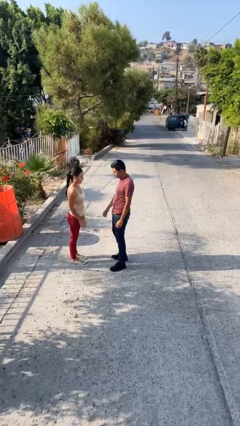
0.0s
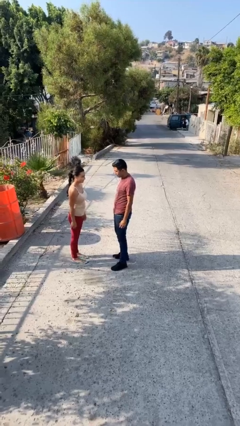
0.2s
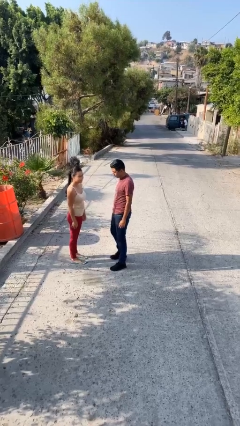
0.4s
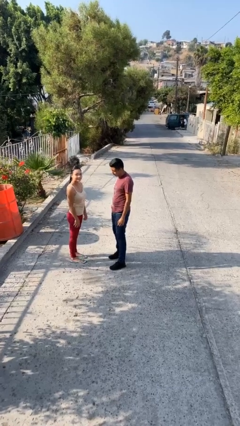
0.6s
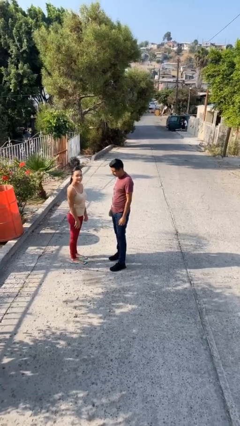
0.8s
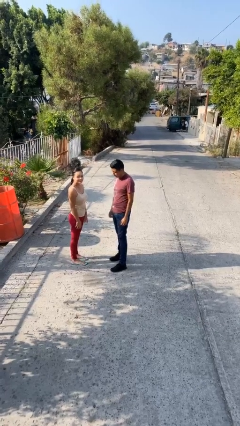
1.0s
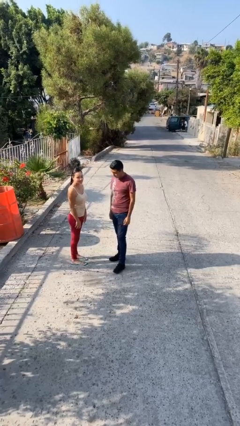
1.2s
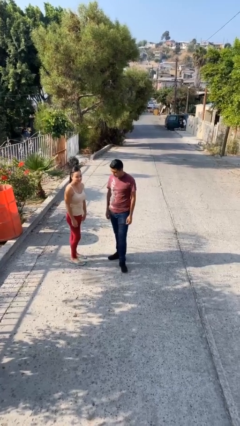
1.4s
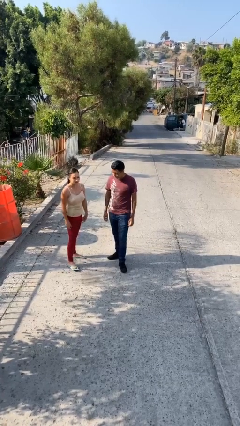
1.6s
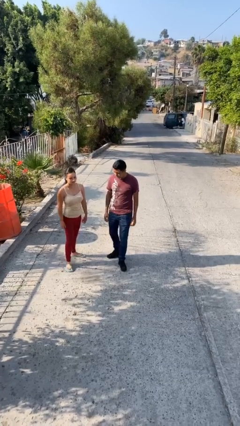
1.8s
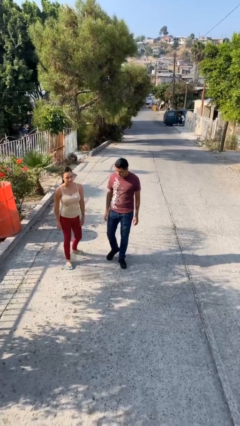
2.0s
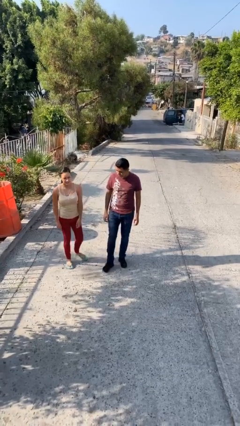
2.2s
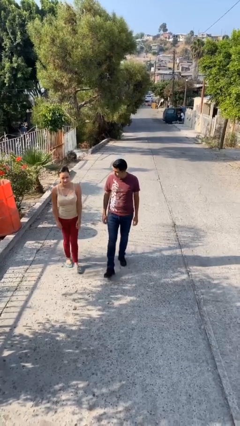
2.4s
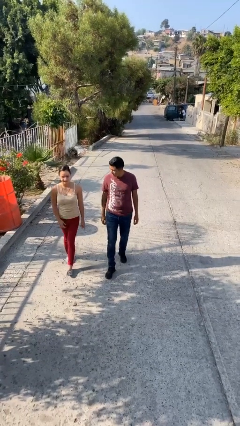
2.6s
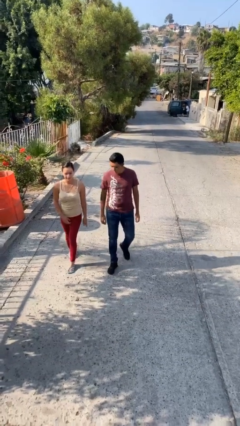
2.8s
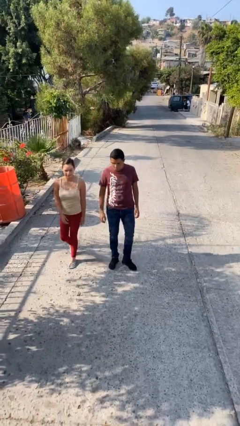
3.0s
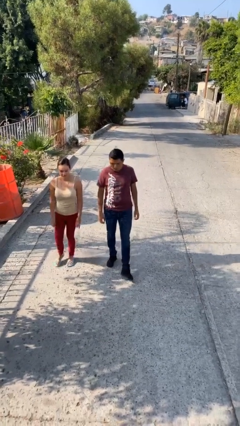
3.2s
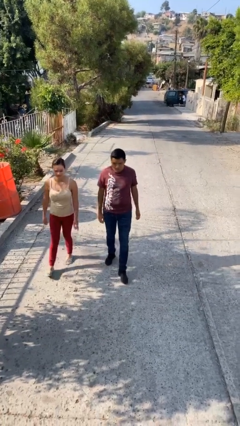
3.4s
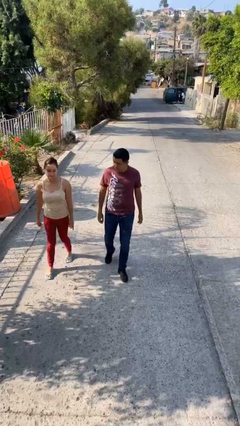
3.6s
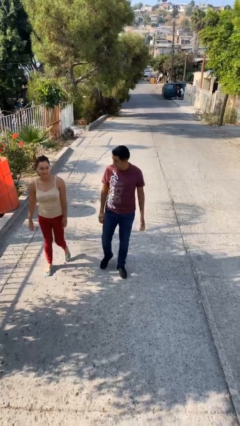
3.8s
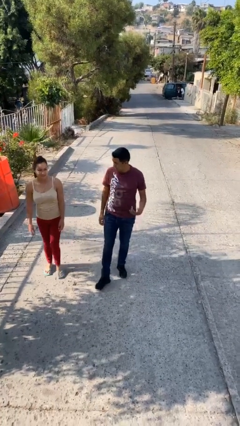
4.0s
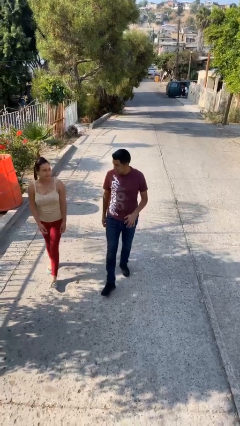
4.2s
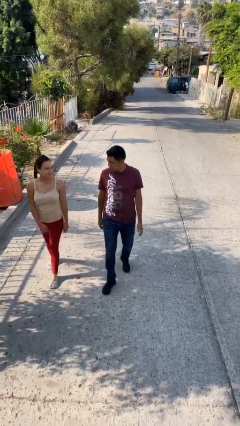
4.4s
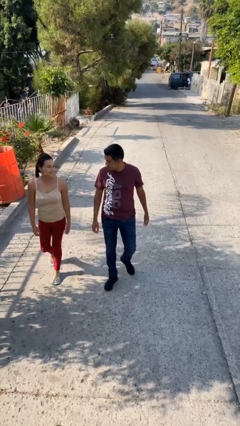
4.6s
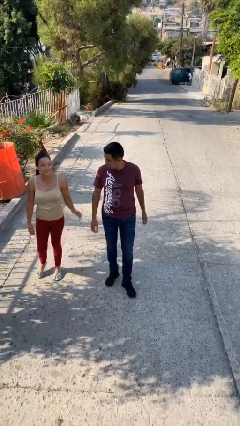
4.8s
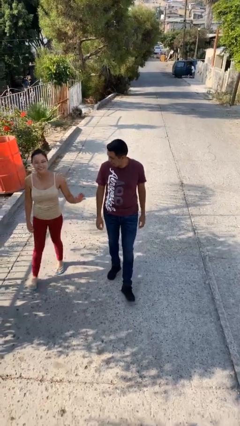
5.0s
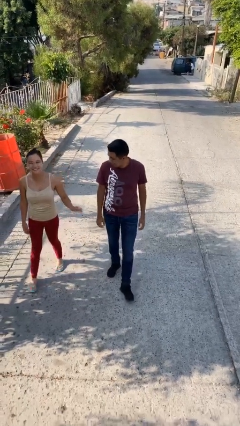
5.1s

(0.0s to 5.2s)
person talks to person

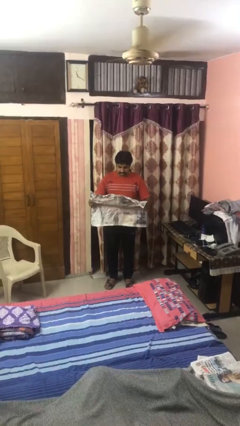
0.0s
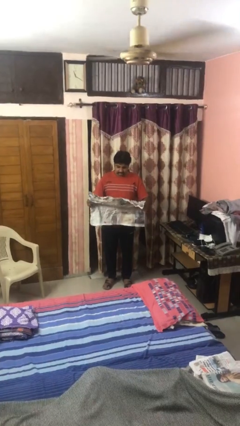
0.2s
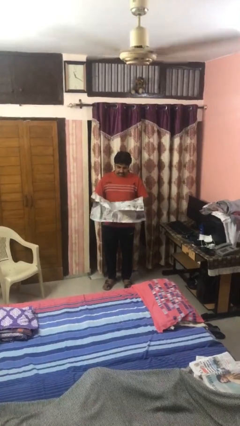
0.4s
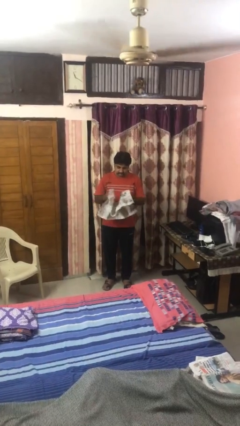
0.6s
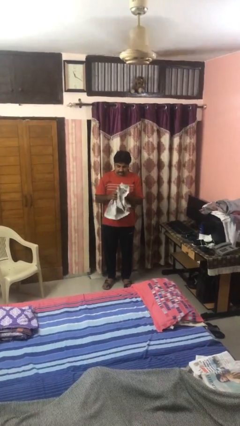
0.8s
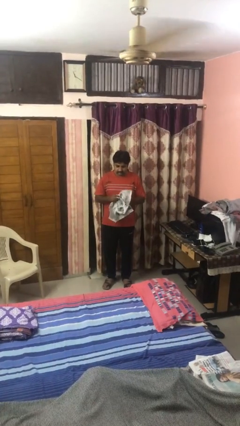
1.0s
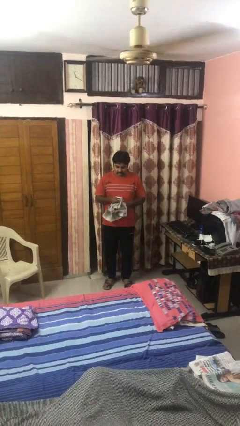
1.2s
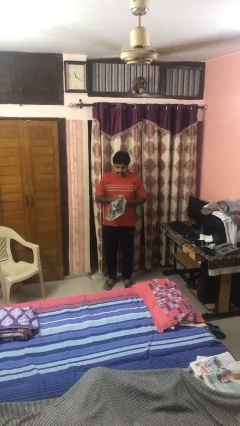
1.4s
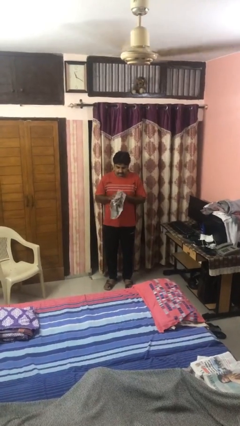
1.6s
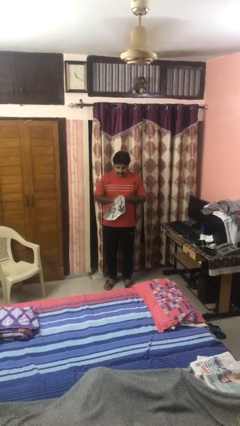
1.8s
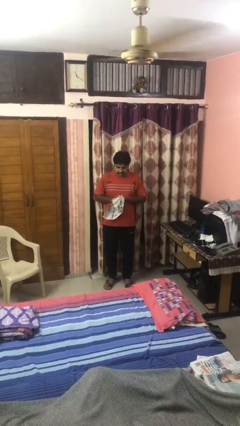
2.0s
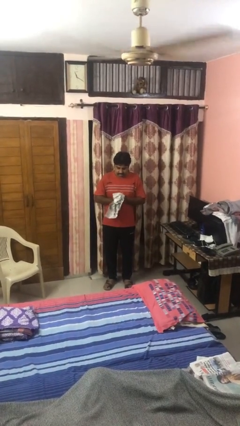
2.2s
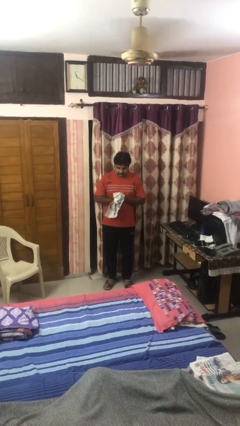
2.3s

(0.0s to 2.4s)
person crumples paper

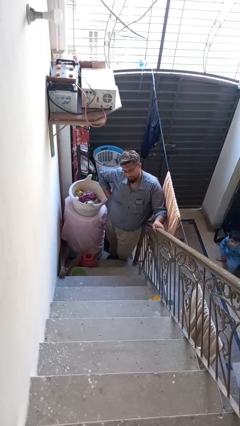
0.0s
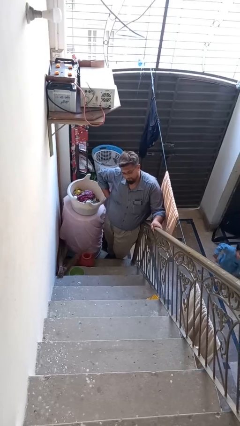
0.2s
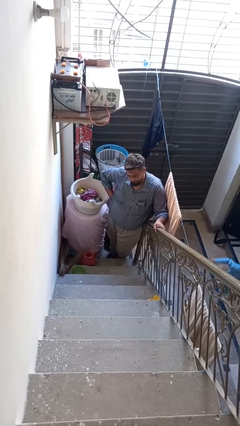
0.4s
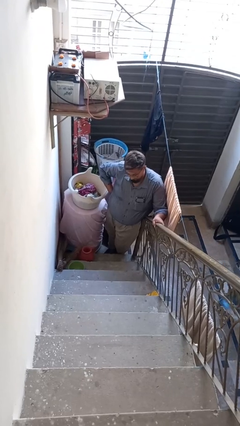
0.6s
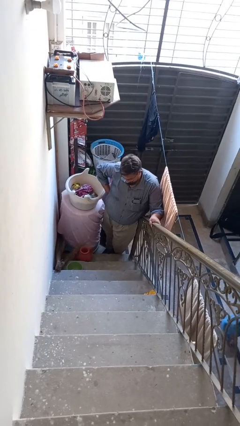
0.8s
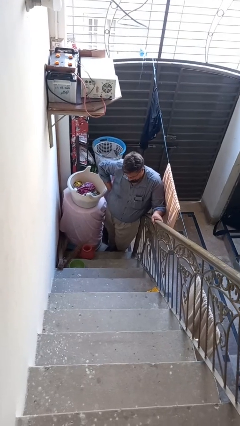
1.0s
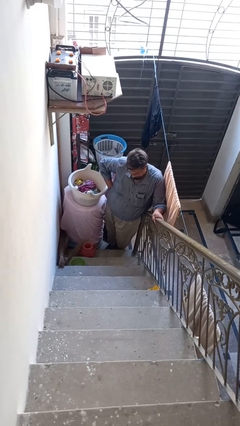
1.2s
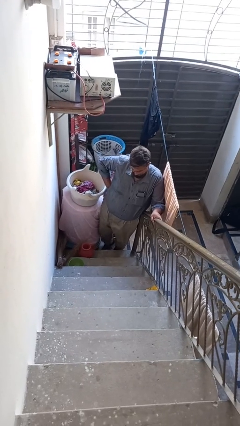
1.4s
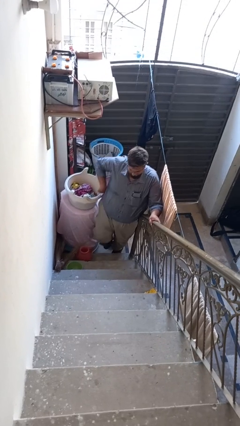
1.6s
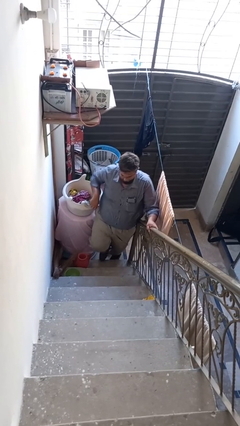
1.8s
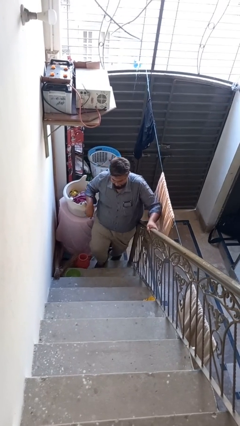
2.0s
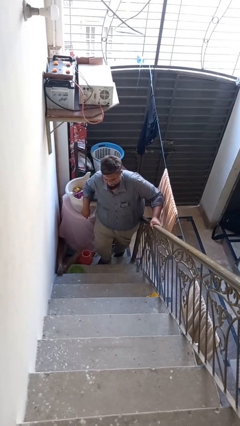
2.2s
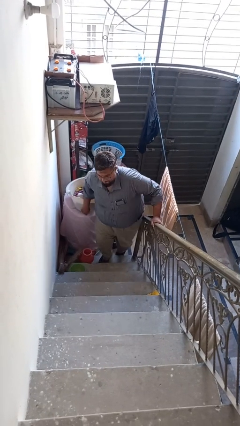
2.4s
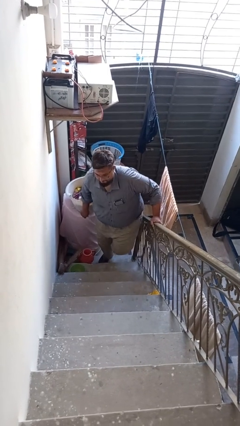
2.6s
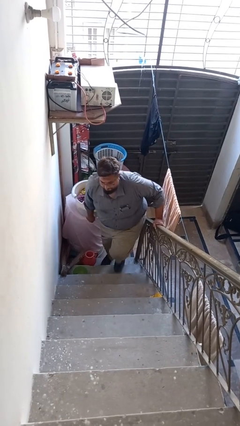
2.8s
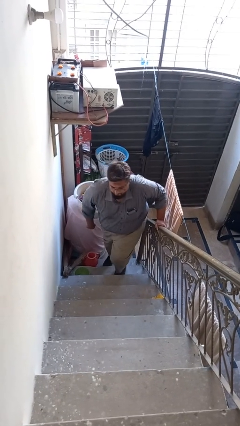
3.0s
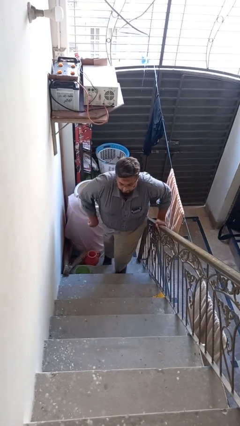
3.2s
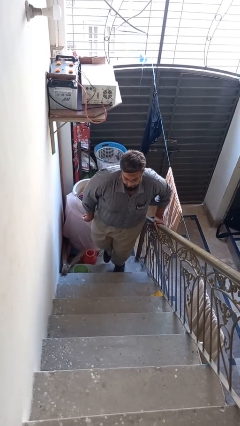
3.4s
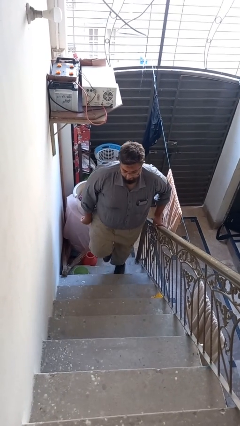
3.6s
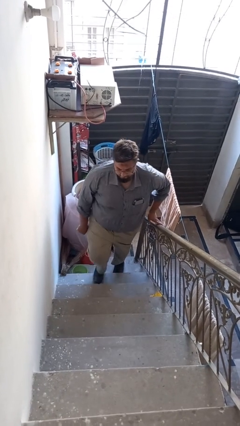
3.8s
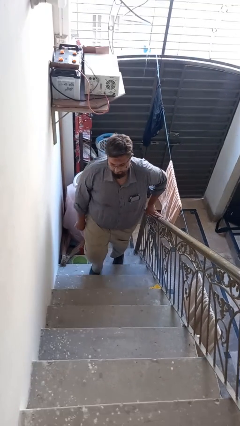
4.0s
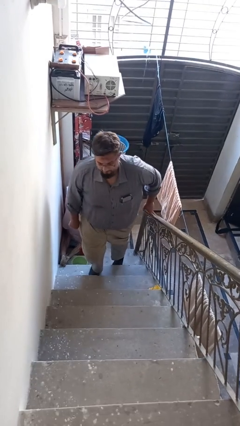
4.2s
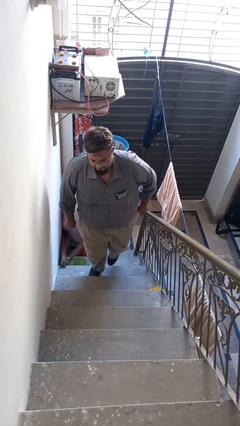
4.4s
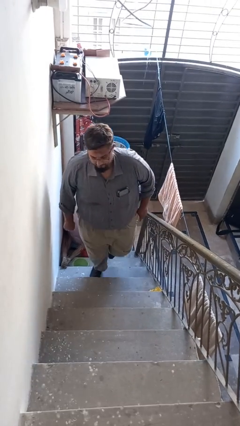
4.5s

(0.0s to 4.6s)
person climbs up stairs

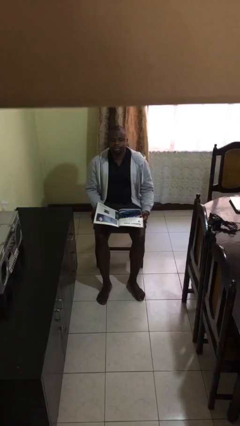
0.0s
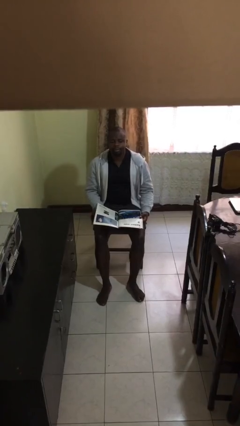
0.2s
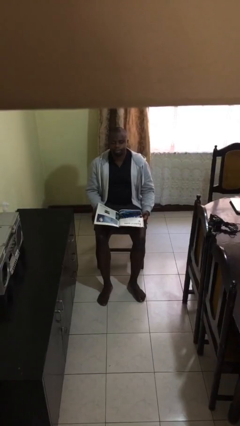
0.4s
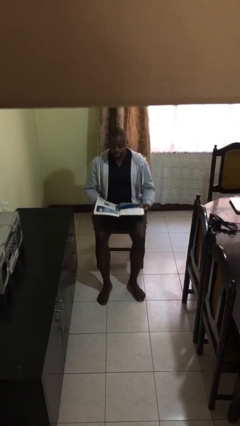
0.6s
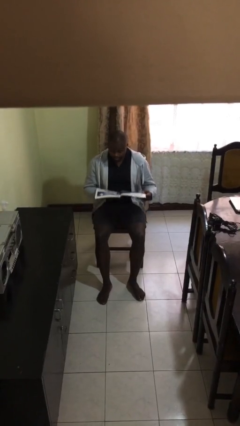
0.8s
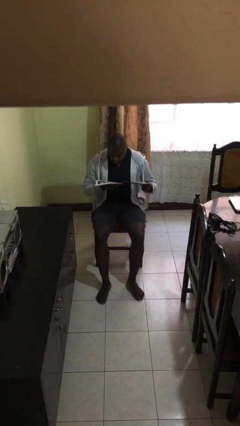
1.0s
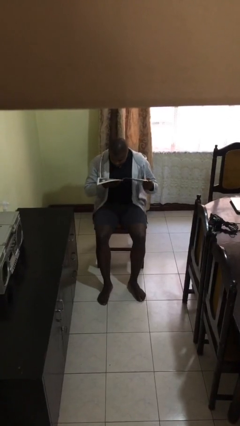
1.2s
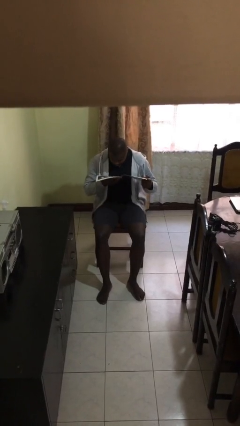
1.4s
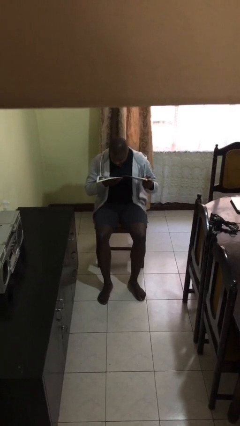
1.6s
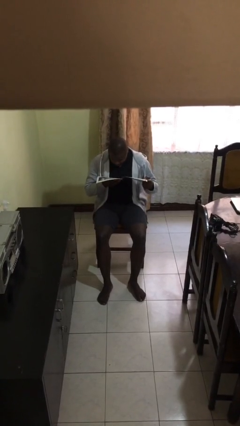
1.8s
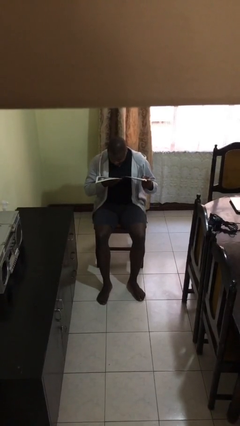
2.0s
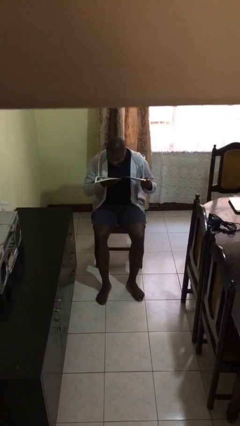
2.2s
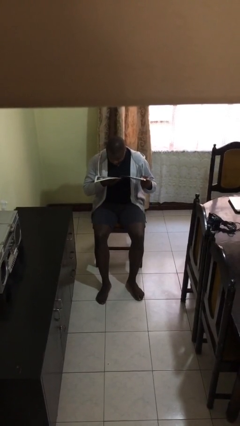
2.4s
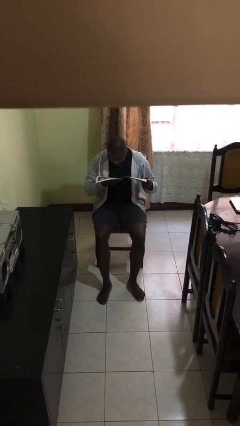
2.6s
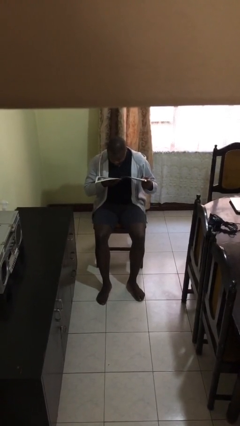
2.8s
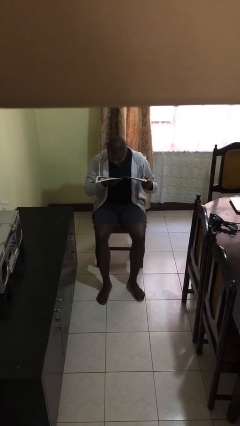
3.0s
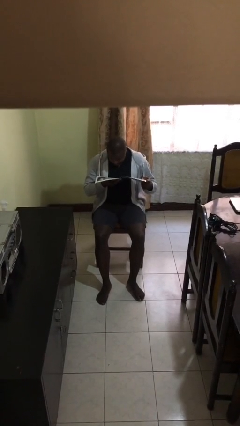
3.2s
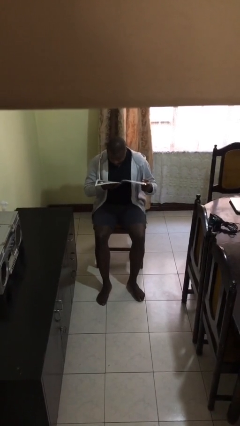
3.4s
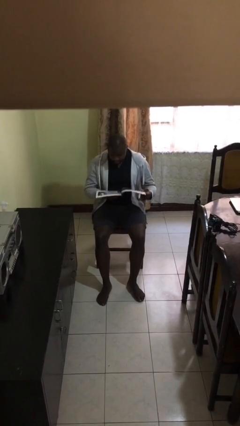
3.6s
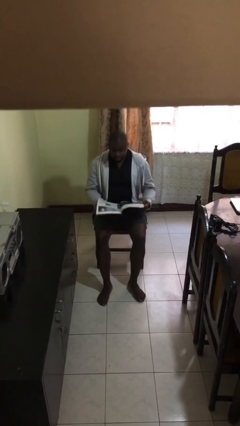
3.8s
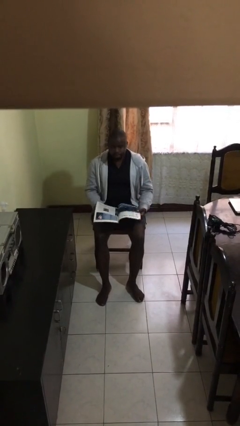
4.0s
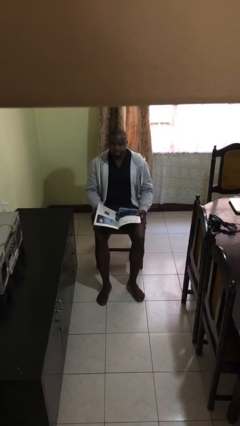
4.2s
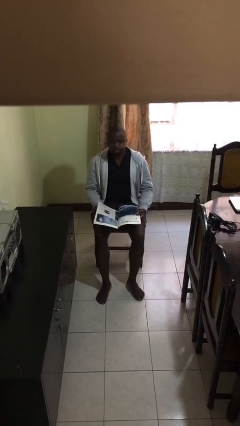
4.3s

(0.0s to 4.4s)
person reads document

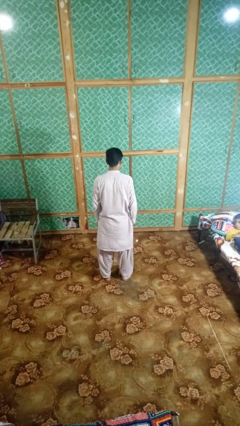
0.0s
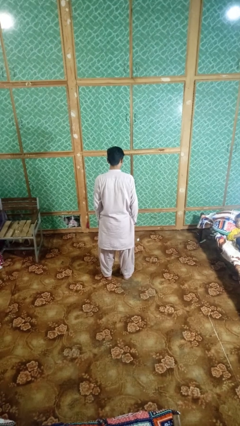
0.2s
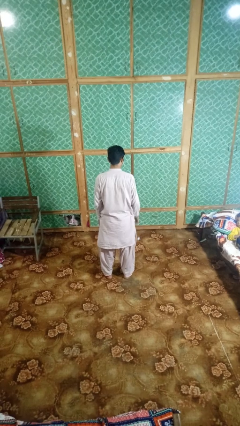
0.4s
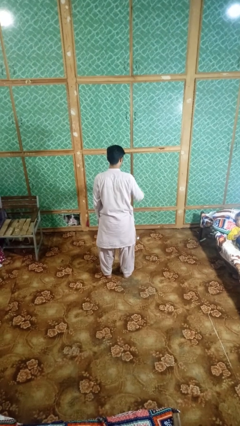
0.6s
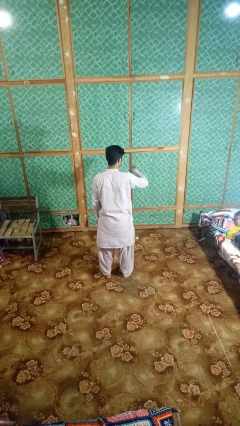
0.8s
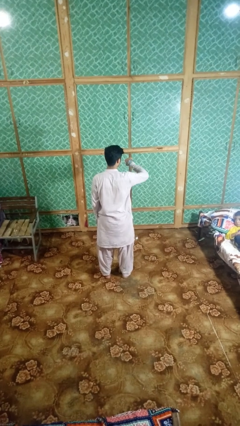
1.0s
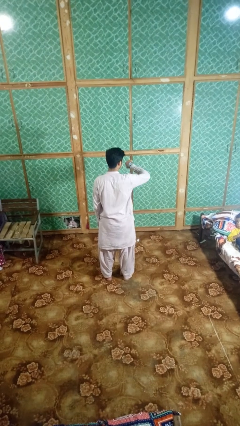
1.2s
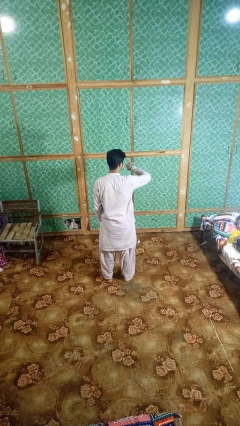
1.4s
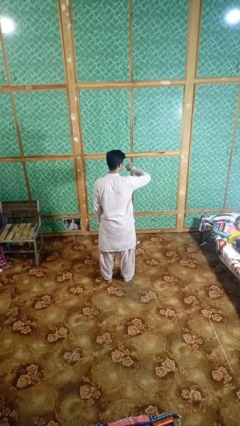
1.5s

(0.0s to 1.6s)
person looks at wristwatch
